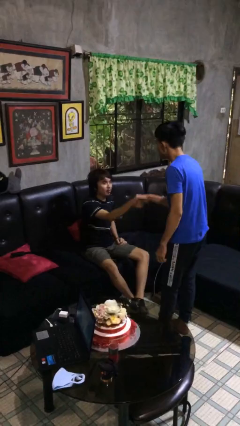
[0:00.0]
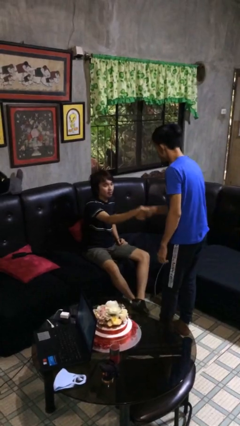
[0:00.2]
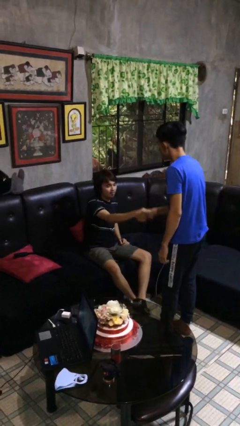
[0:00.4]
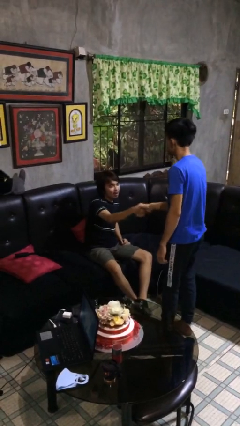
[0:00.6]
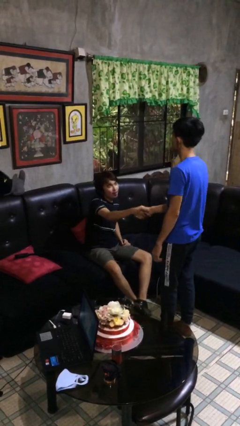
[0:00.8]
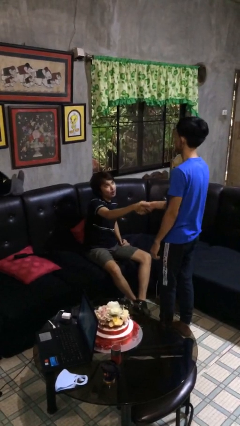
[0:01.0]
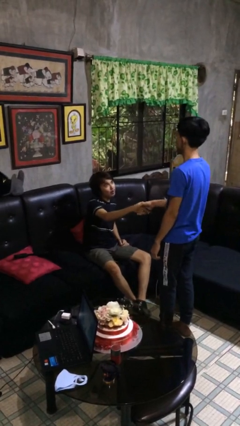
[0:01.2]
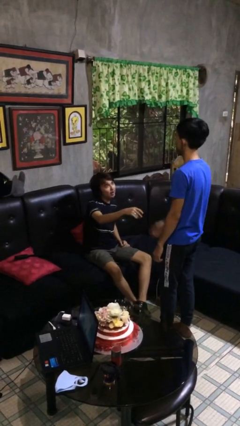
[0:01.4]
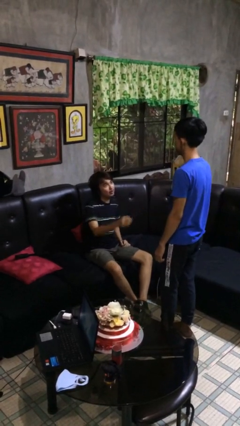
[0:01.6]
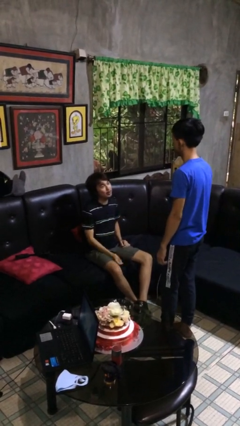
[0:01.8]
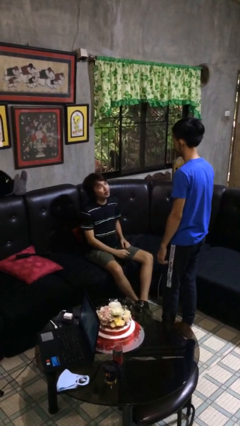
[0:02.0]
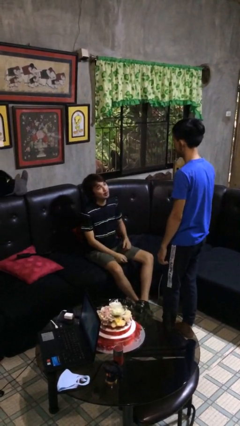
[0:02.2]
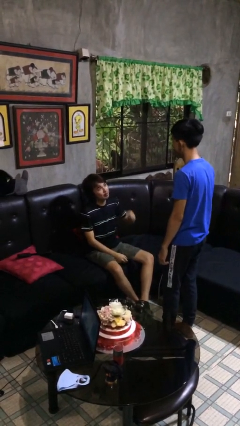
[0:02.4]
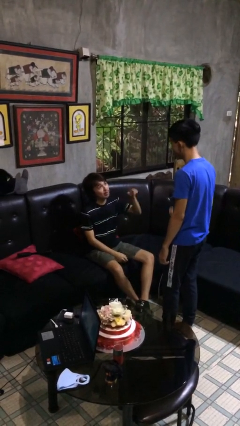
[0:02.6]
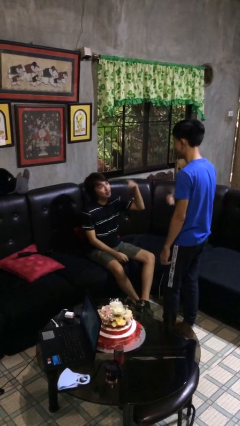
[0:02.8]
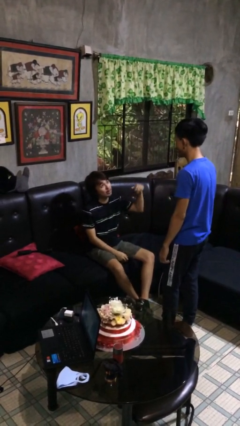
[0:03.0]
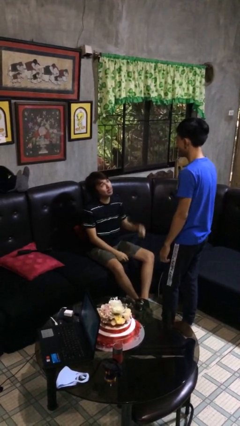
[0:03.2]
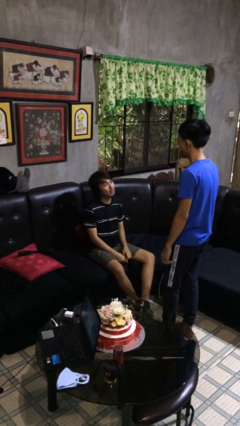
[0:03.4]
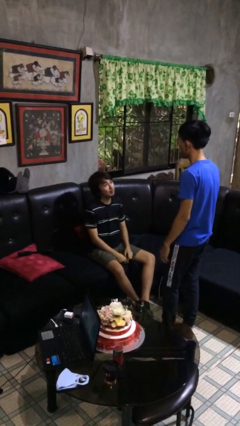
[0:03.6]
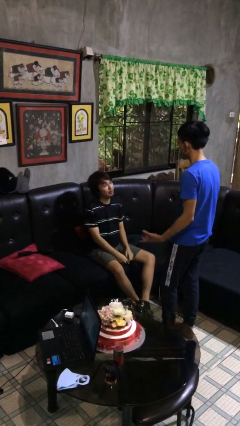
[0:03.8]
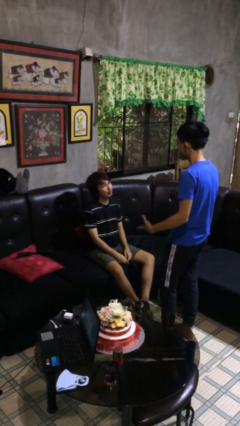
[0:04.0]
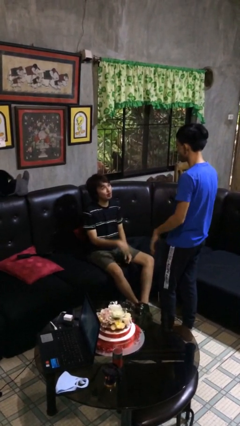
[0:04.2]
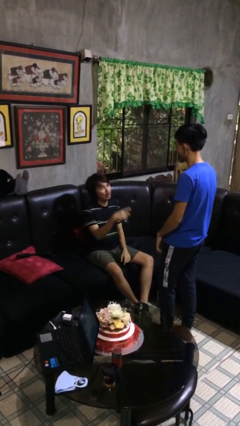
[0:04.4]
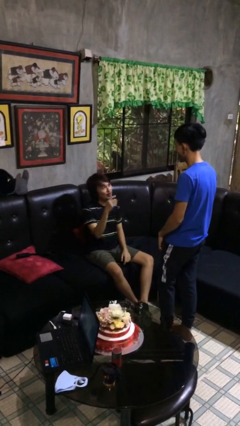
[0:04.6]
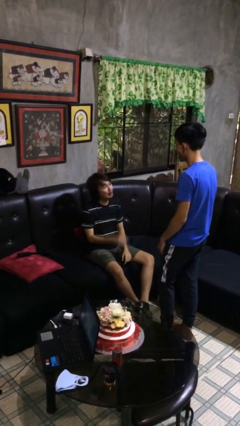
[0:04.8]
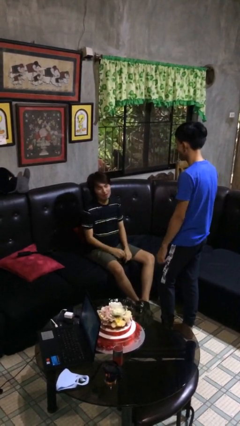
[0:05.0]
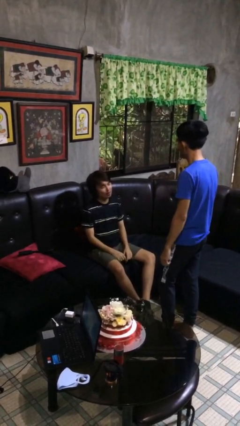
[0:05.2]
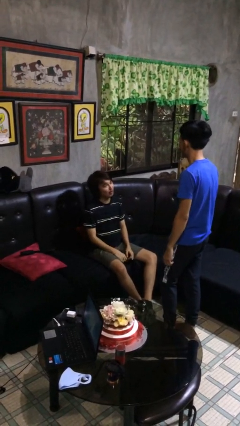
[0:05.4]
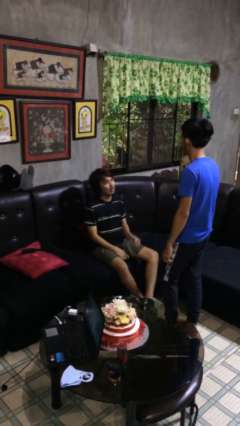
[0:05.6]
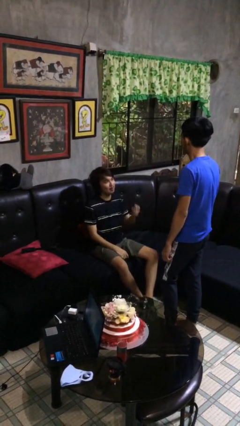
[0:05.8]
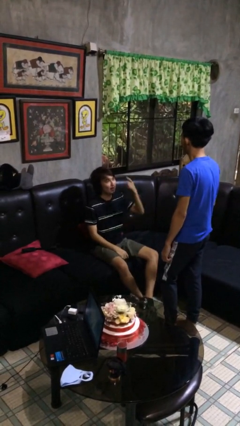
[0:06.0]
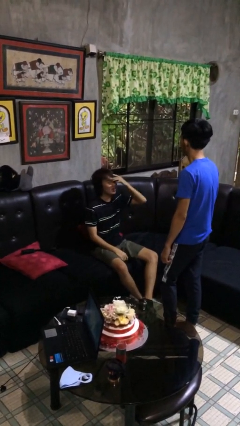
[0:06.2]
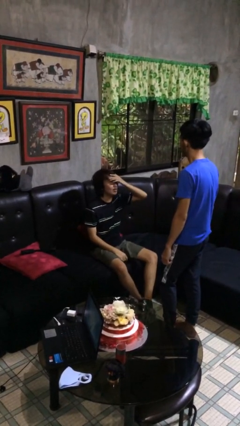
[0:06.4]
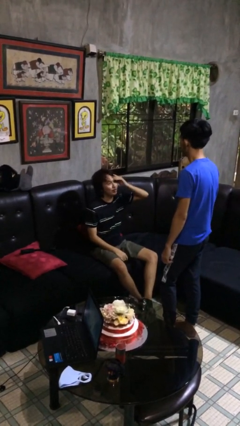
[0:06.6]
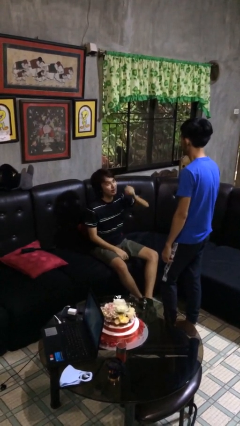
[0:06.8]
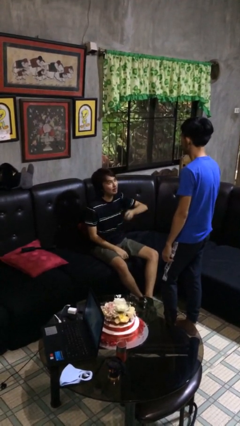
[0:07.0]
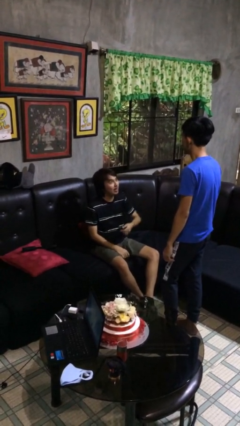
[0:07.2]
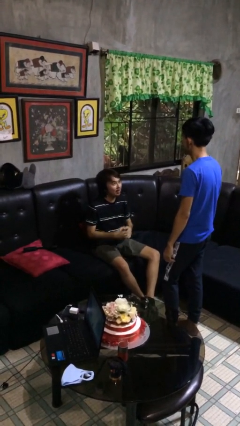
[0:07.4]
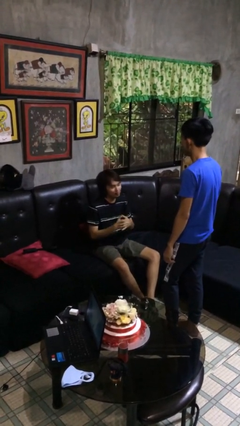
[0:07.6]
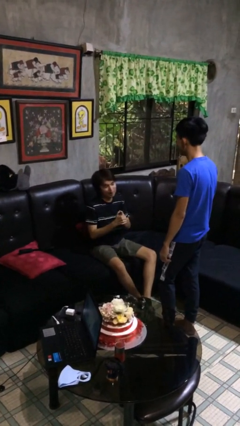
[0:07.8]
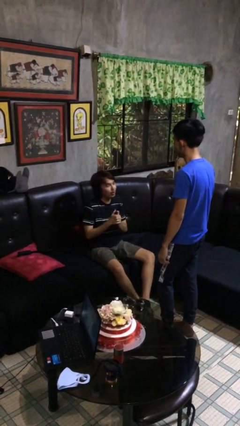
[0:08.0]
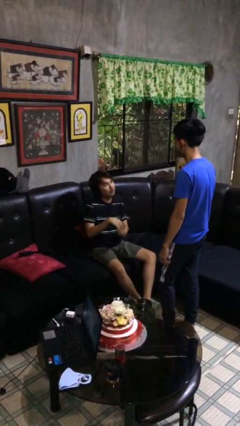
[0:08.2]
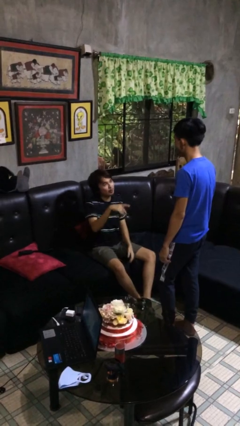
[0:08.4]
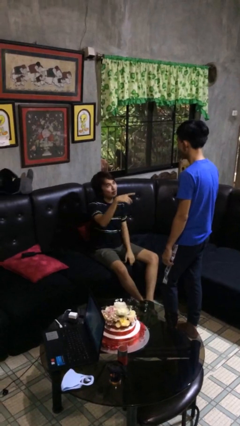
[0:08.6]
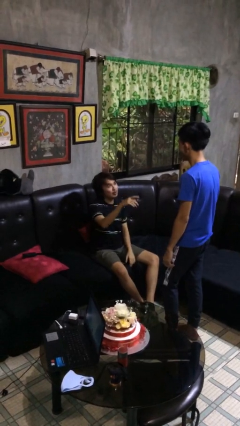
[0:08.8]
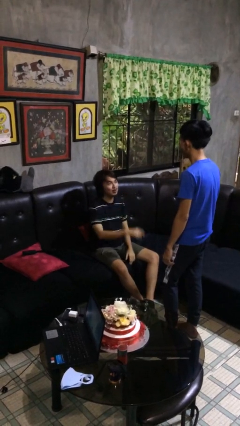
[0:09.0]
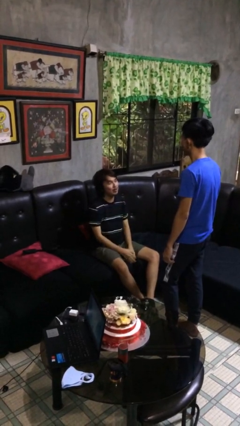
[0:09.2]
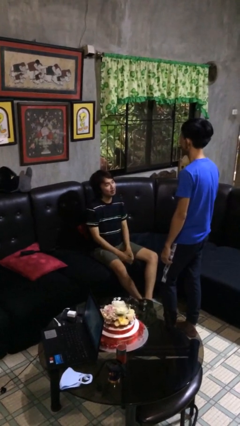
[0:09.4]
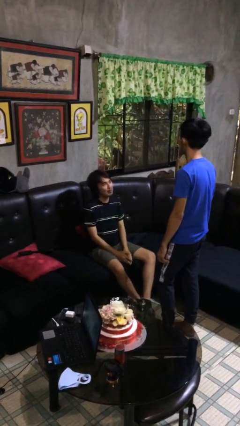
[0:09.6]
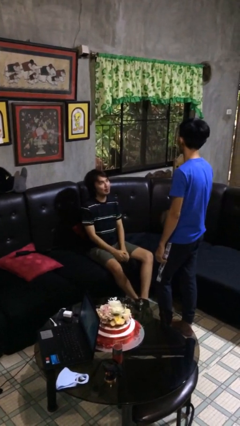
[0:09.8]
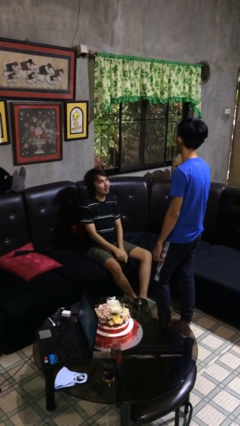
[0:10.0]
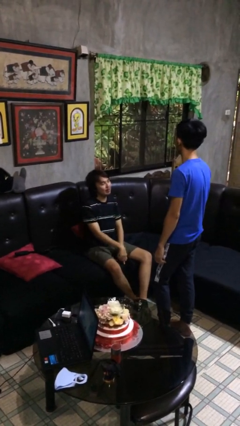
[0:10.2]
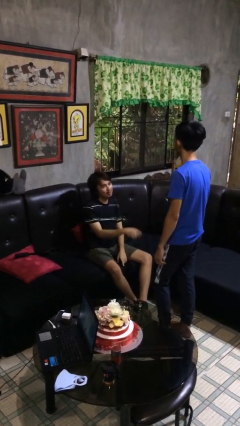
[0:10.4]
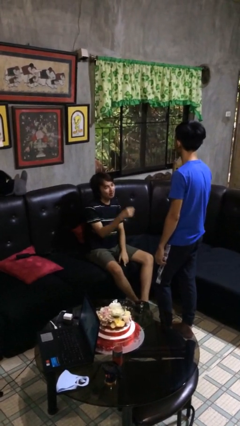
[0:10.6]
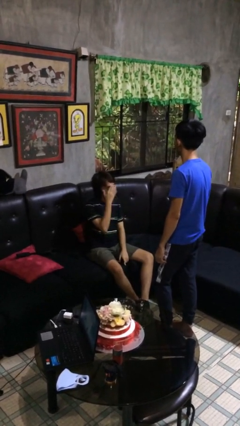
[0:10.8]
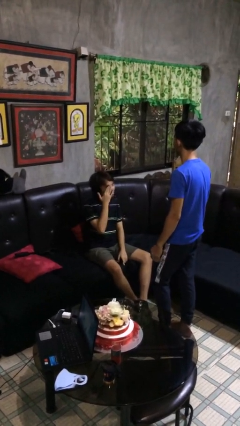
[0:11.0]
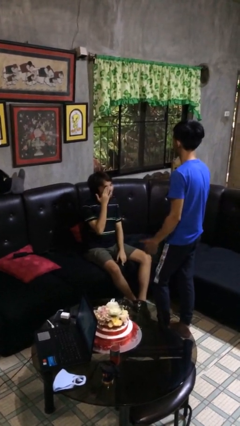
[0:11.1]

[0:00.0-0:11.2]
person shakes hand

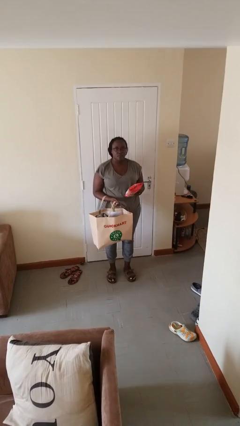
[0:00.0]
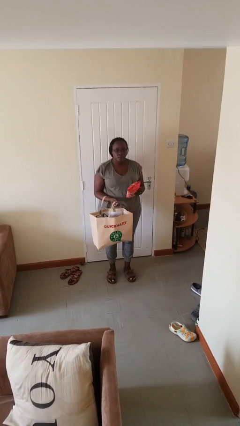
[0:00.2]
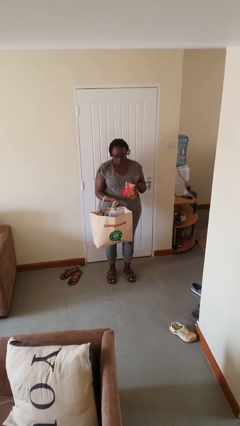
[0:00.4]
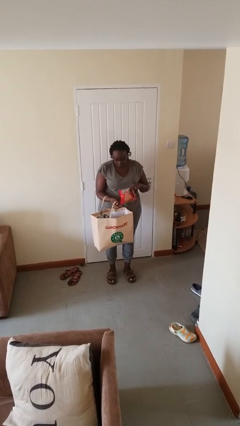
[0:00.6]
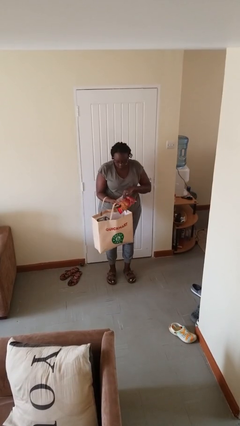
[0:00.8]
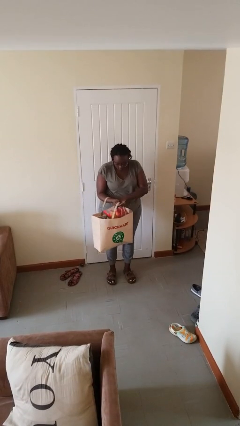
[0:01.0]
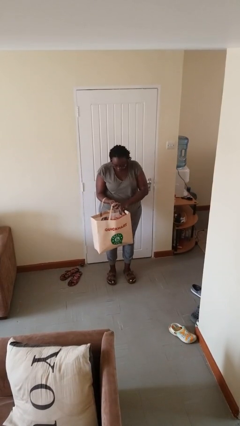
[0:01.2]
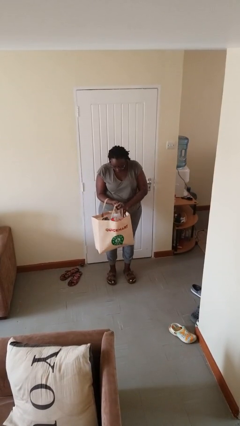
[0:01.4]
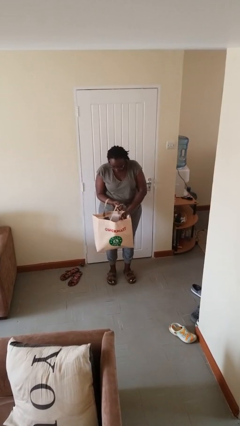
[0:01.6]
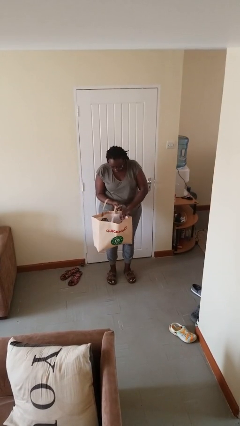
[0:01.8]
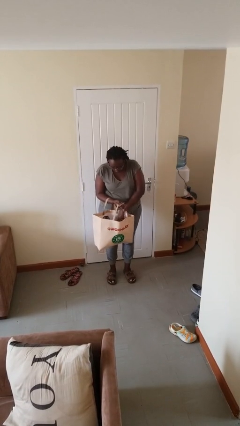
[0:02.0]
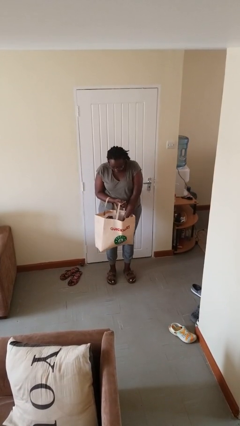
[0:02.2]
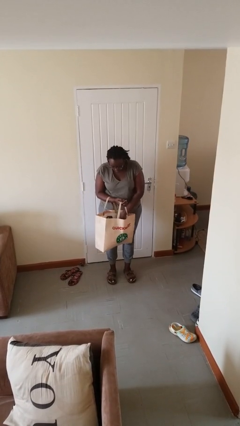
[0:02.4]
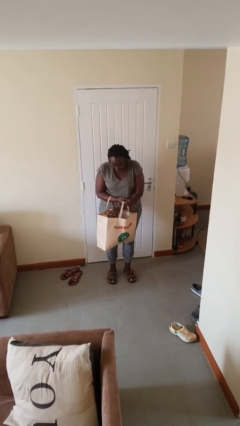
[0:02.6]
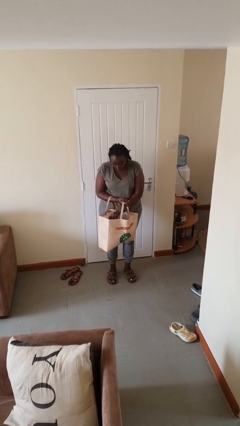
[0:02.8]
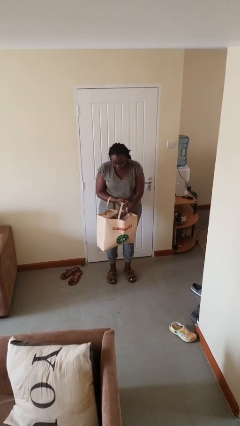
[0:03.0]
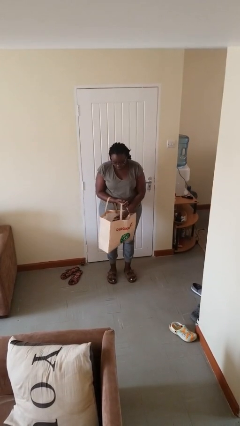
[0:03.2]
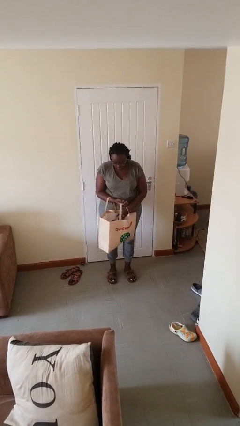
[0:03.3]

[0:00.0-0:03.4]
person puts object into bag

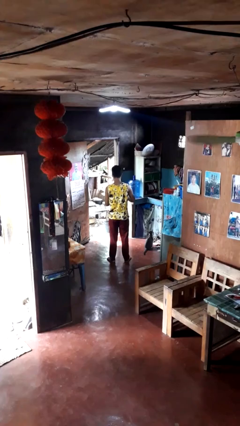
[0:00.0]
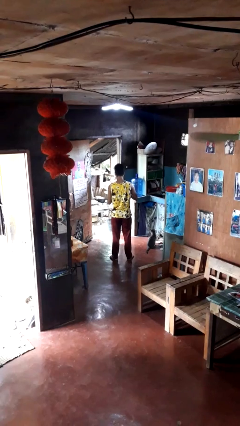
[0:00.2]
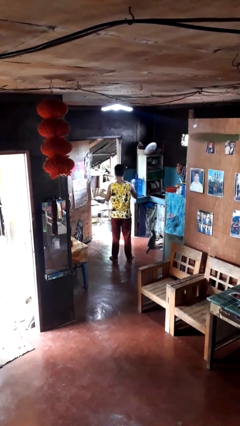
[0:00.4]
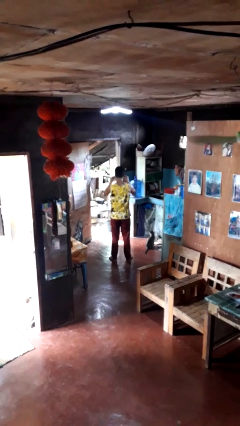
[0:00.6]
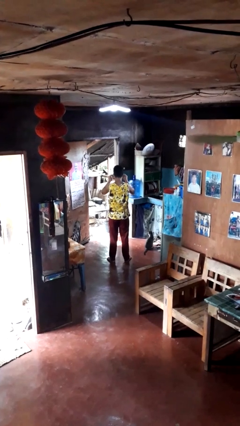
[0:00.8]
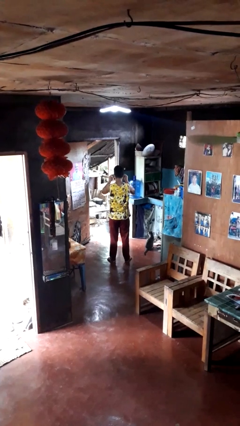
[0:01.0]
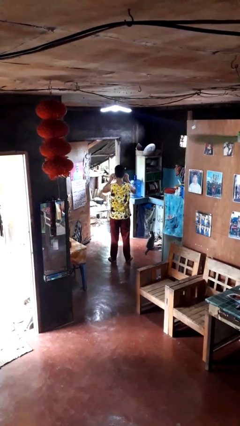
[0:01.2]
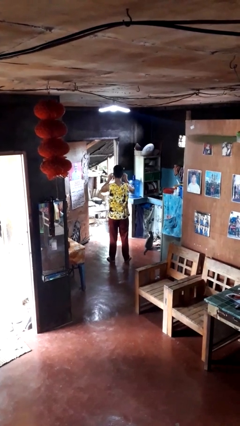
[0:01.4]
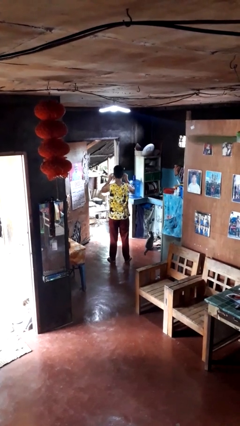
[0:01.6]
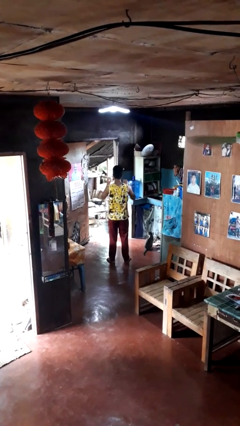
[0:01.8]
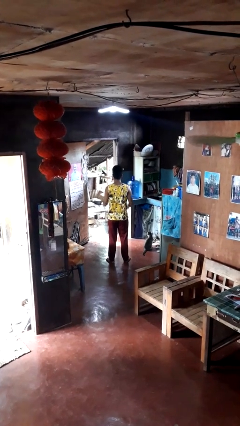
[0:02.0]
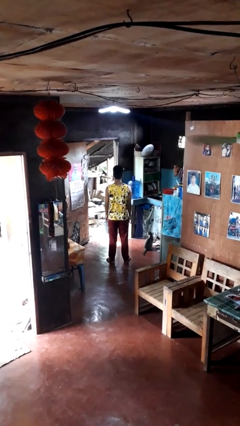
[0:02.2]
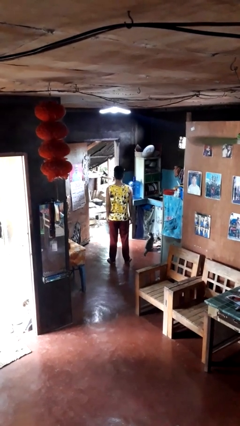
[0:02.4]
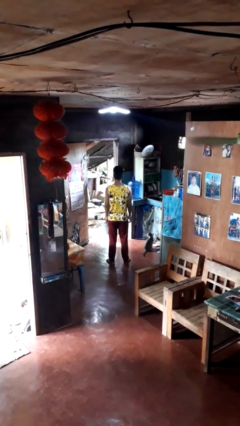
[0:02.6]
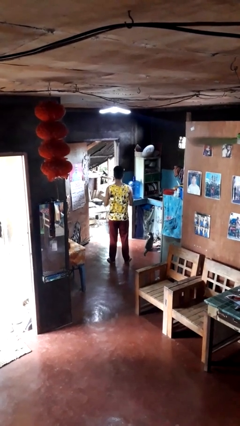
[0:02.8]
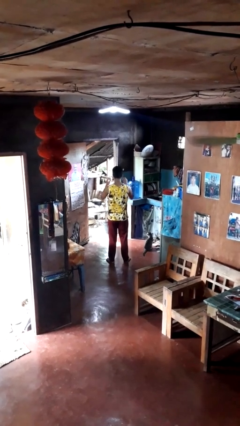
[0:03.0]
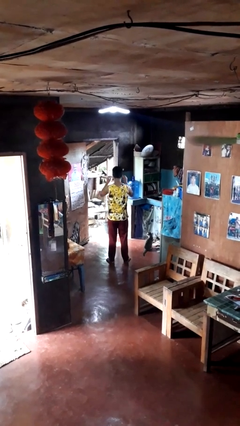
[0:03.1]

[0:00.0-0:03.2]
person puts on glasses
